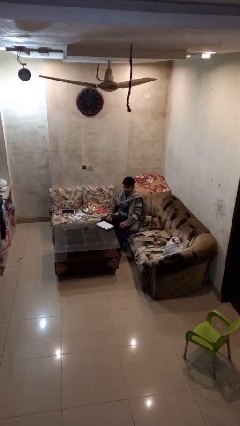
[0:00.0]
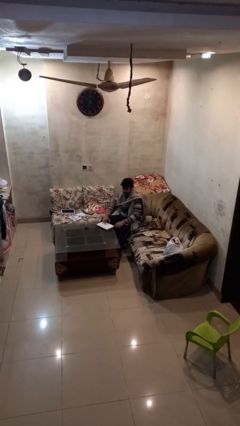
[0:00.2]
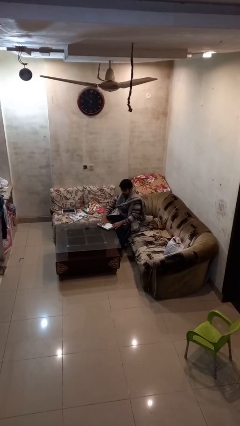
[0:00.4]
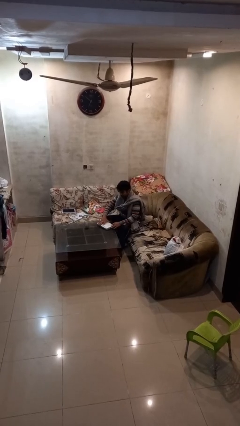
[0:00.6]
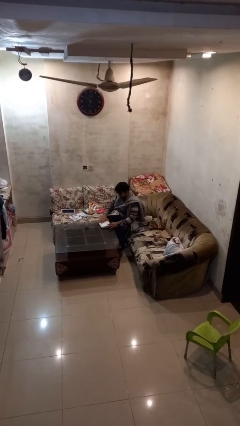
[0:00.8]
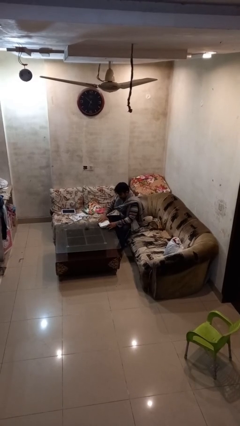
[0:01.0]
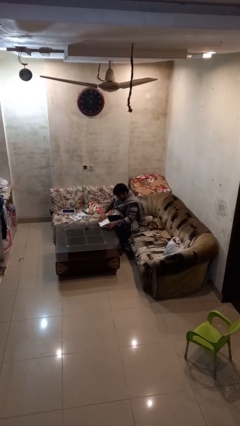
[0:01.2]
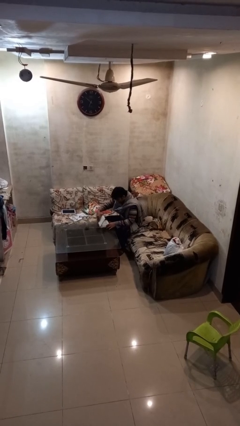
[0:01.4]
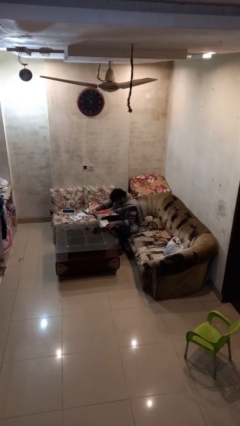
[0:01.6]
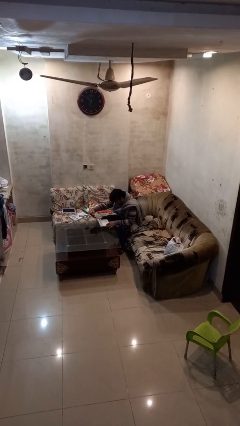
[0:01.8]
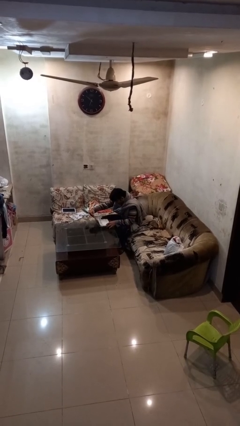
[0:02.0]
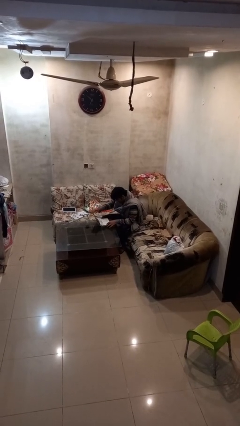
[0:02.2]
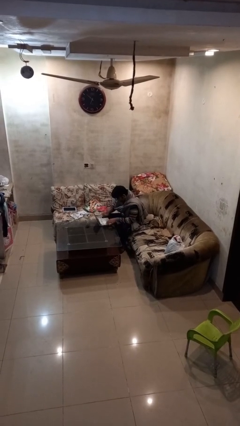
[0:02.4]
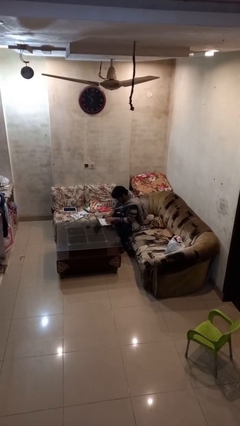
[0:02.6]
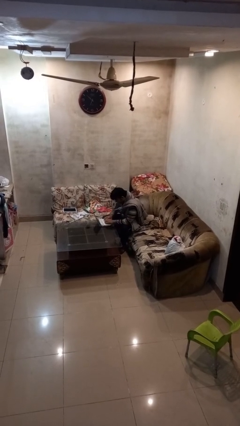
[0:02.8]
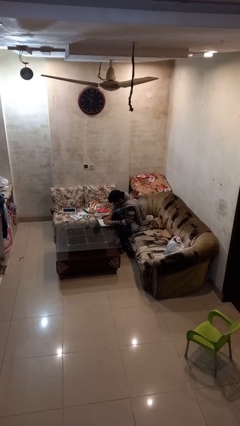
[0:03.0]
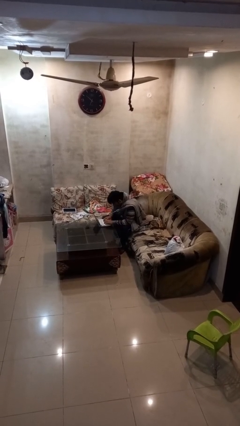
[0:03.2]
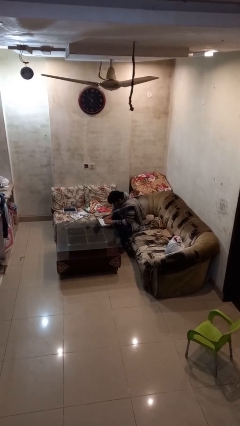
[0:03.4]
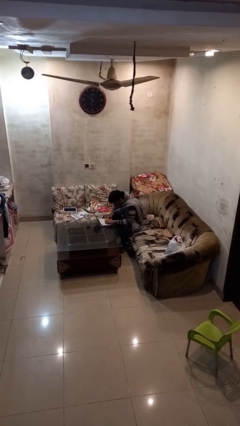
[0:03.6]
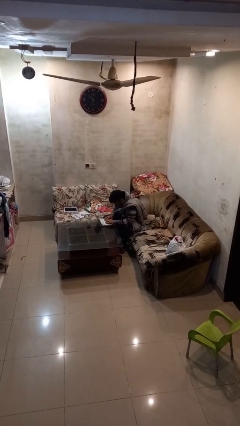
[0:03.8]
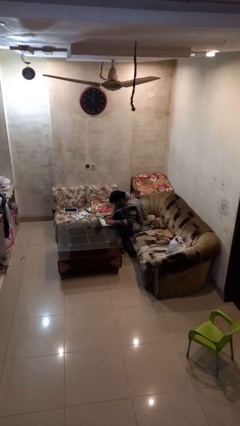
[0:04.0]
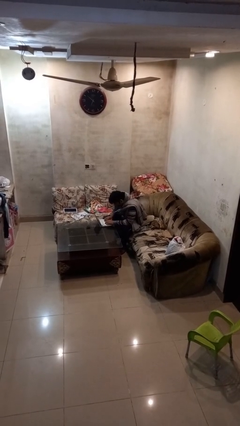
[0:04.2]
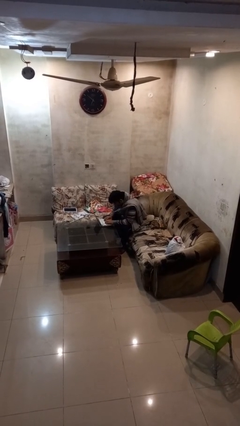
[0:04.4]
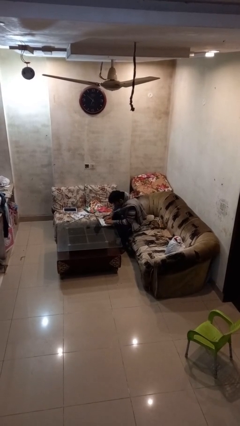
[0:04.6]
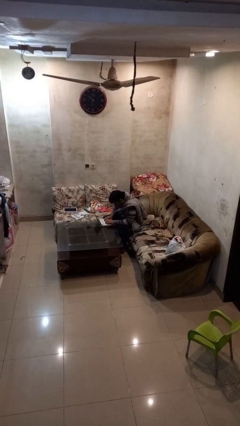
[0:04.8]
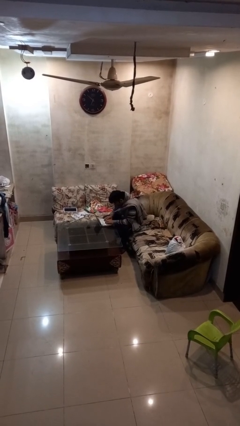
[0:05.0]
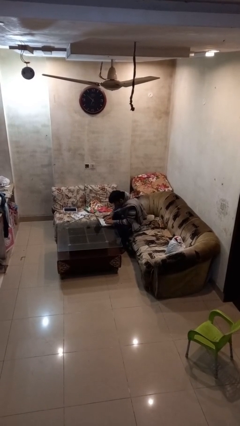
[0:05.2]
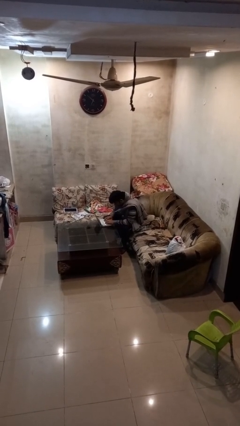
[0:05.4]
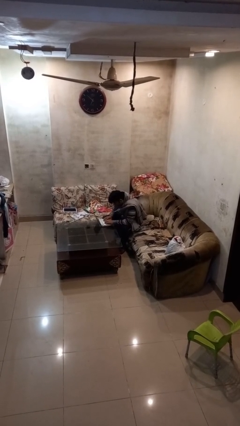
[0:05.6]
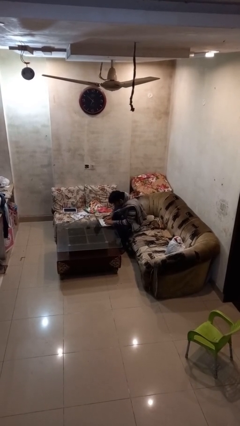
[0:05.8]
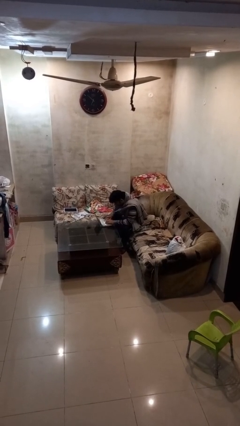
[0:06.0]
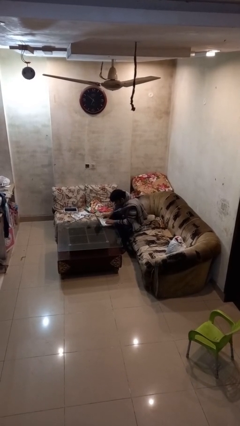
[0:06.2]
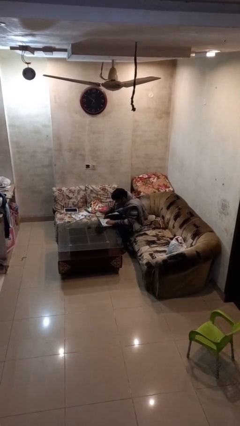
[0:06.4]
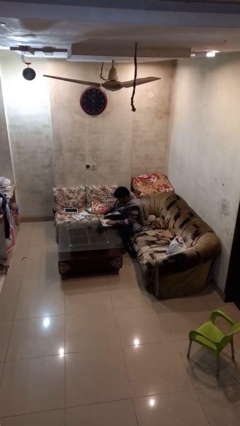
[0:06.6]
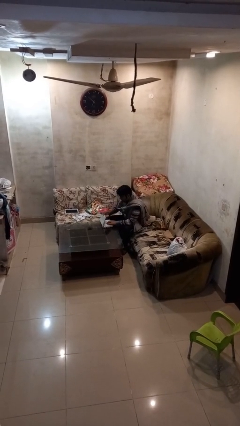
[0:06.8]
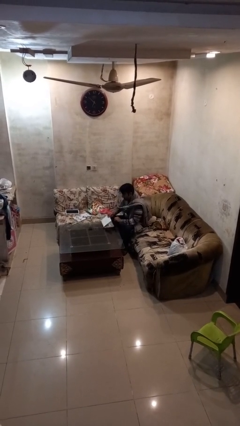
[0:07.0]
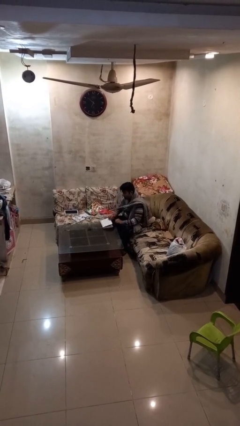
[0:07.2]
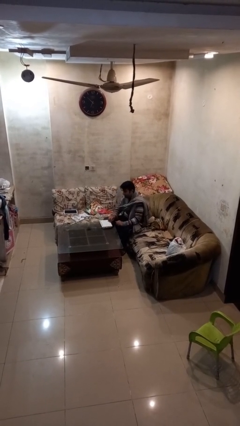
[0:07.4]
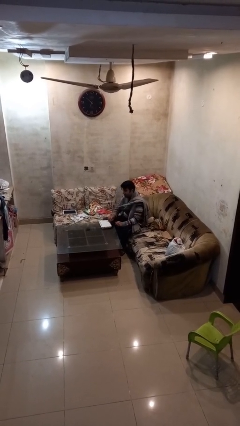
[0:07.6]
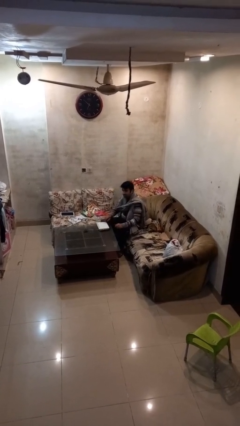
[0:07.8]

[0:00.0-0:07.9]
person interacts with laptop

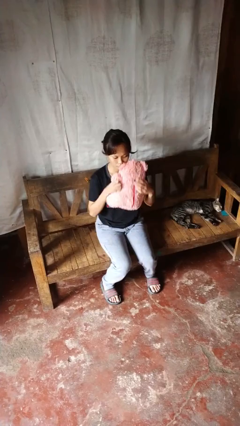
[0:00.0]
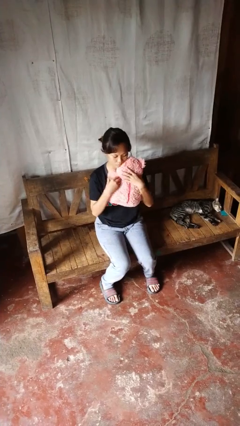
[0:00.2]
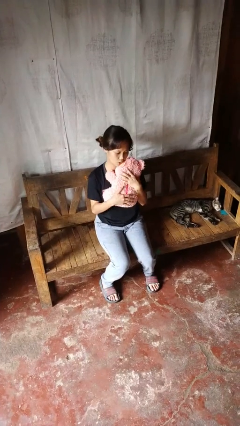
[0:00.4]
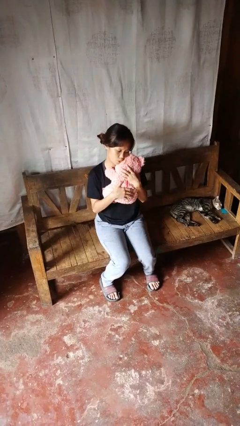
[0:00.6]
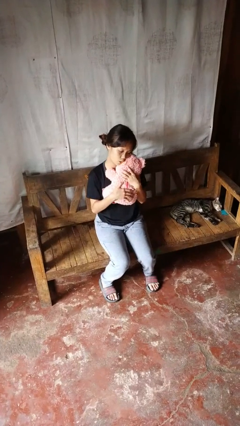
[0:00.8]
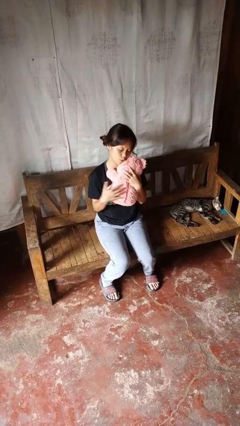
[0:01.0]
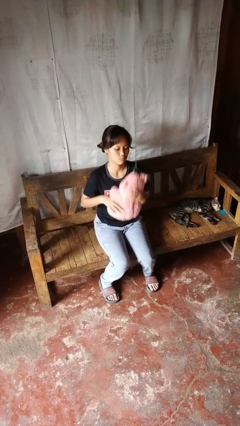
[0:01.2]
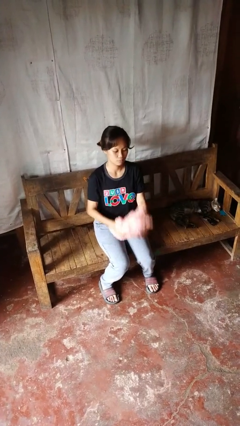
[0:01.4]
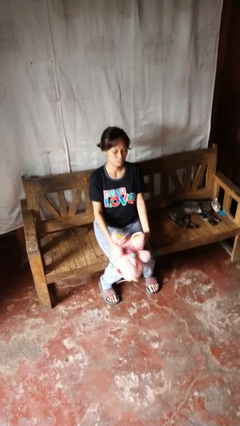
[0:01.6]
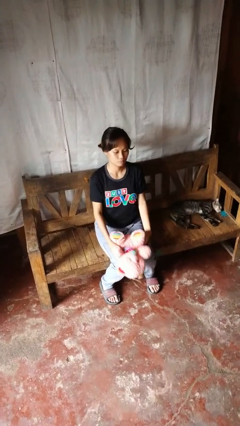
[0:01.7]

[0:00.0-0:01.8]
person hugs stuffed animal

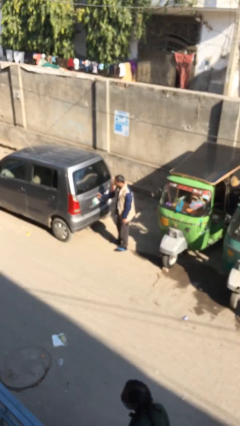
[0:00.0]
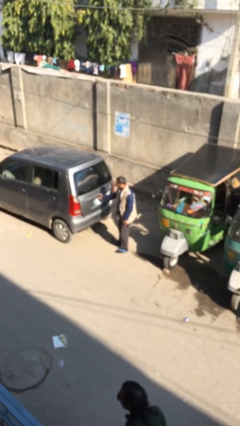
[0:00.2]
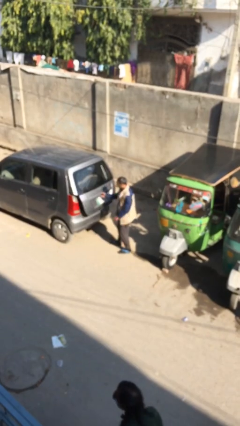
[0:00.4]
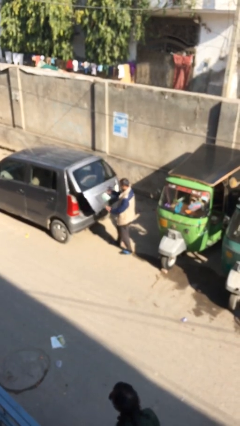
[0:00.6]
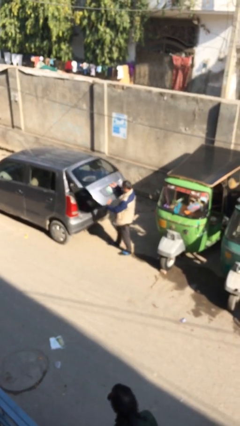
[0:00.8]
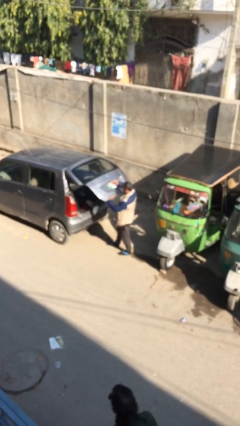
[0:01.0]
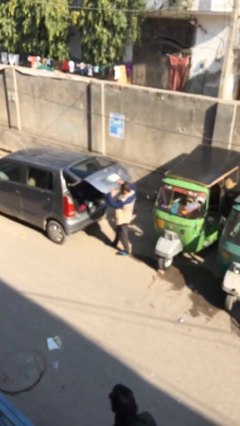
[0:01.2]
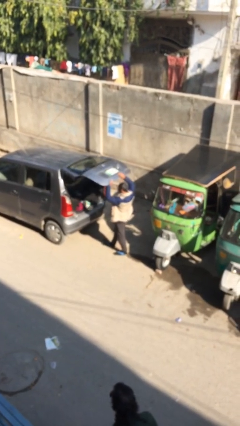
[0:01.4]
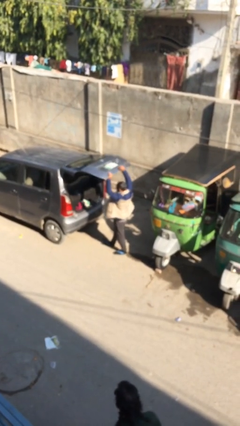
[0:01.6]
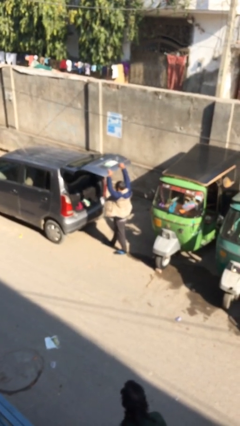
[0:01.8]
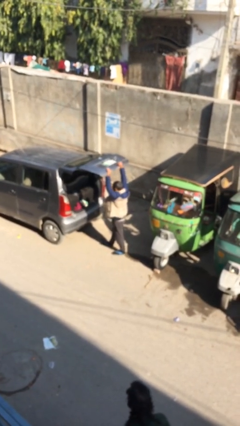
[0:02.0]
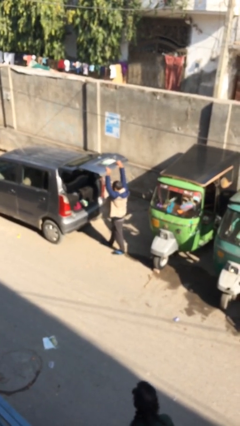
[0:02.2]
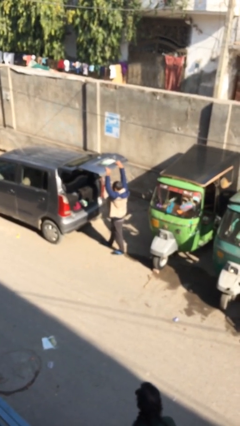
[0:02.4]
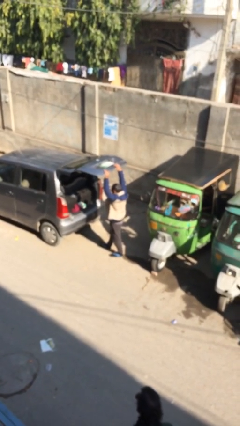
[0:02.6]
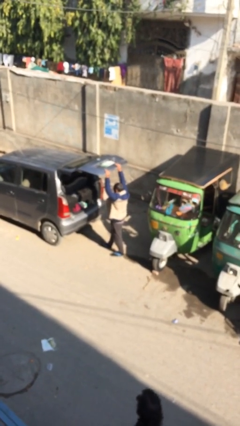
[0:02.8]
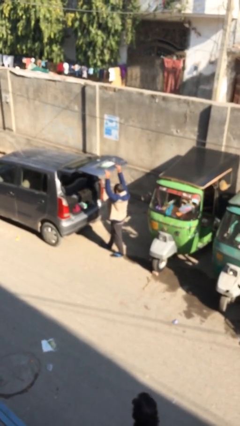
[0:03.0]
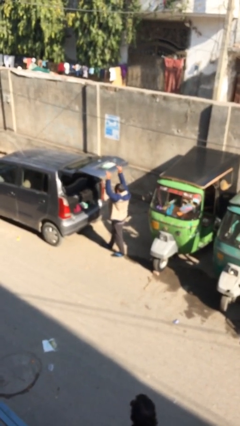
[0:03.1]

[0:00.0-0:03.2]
person opens car trunk

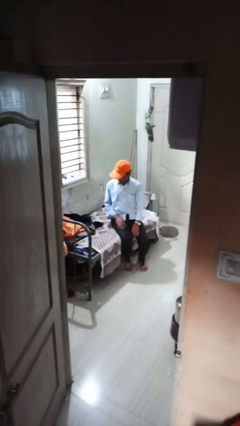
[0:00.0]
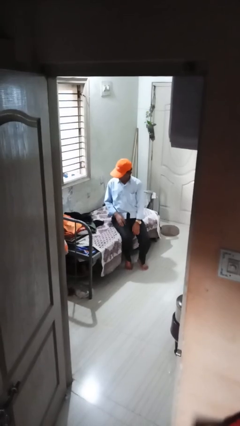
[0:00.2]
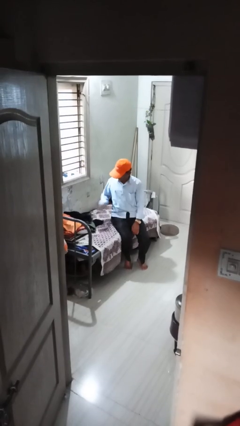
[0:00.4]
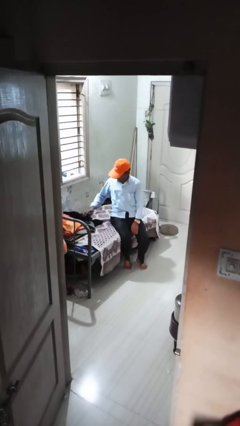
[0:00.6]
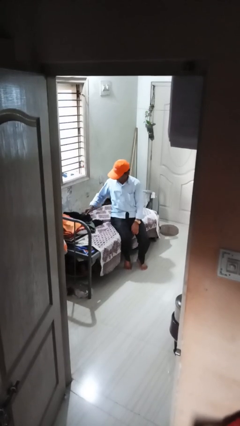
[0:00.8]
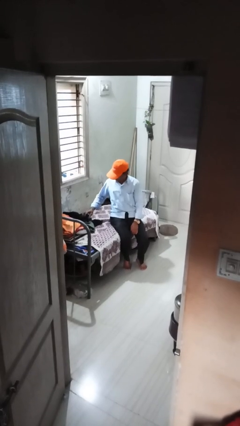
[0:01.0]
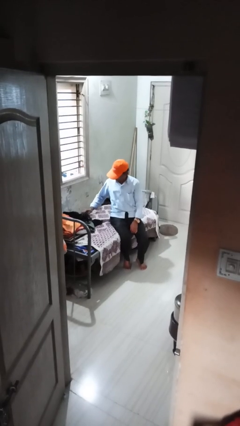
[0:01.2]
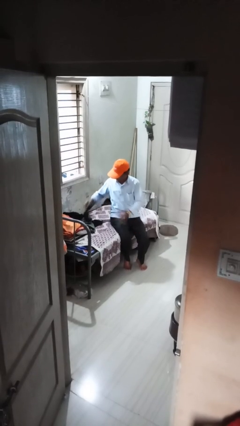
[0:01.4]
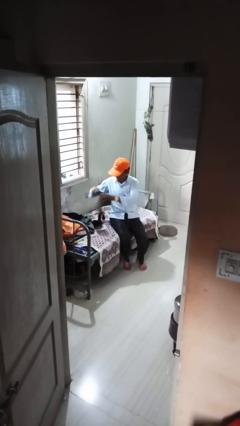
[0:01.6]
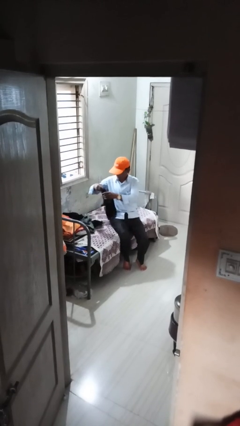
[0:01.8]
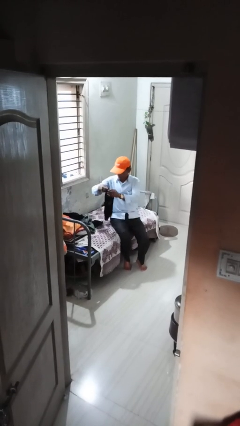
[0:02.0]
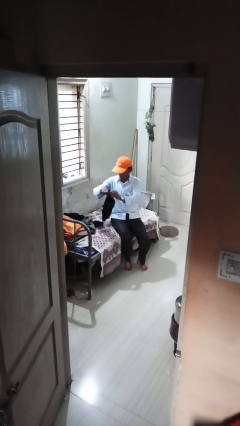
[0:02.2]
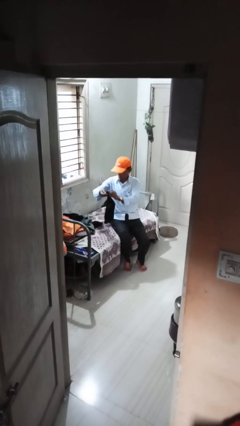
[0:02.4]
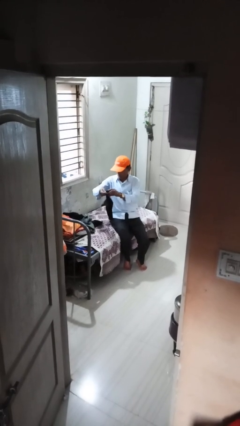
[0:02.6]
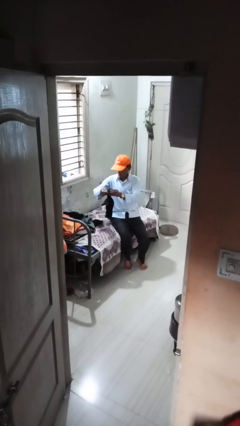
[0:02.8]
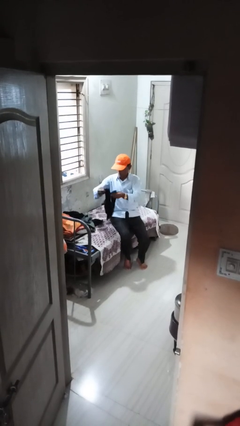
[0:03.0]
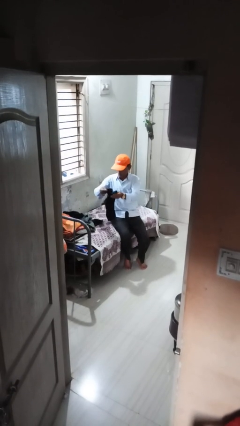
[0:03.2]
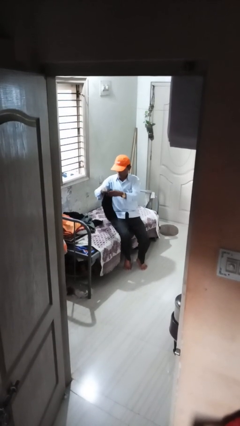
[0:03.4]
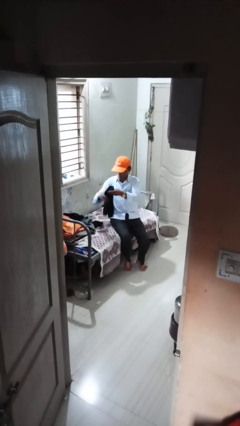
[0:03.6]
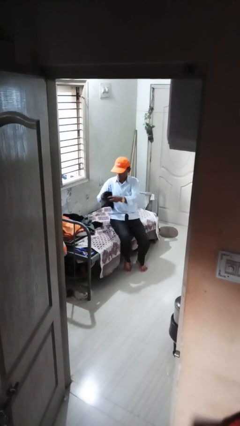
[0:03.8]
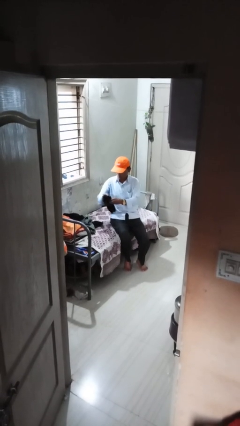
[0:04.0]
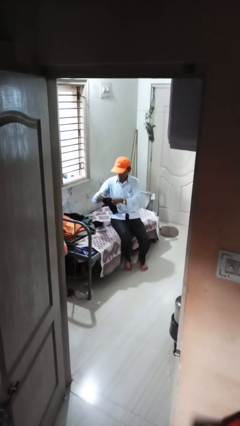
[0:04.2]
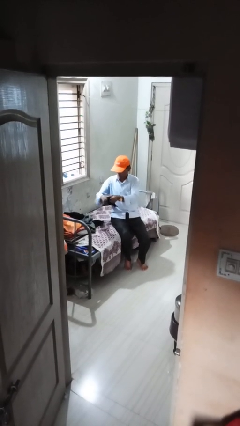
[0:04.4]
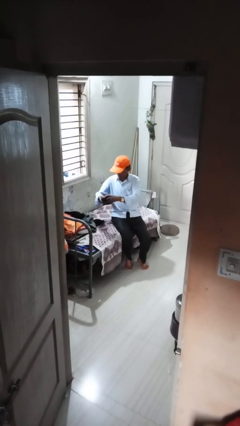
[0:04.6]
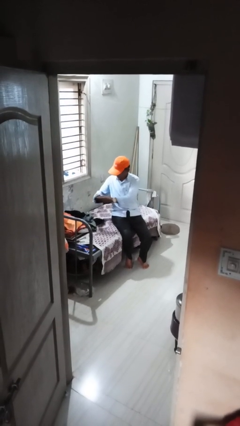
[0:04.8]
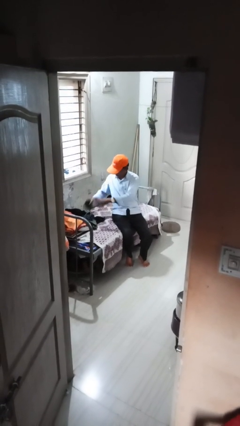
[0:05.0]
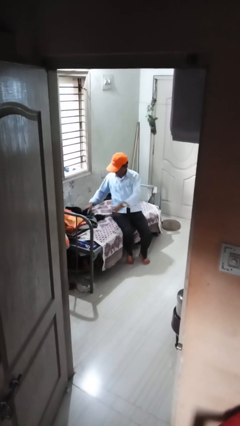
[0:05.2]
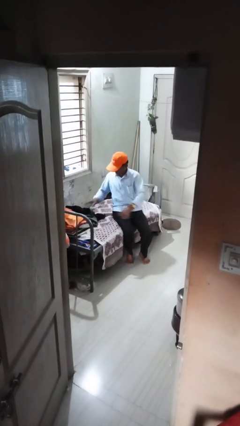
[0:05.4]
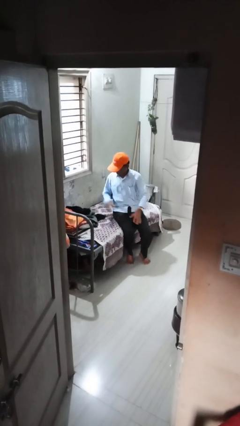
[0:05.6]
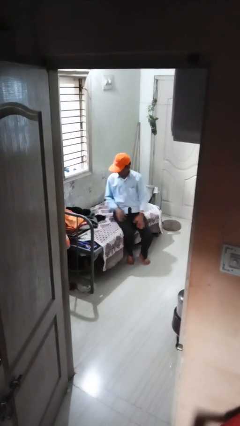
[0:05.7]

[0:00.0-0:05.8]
person folds socks
